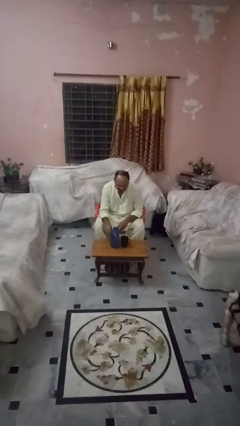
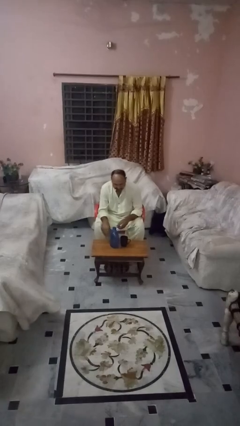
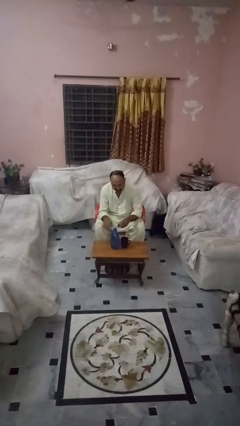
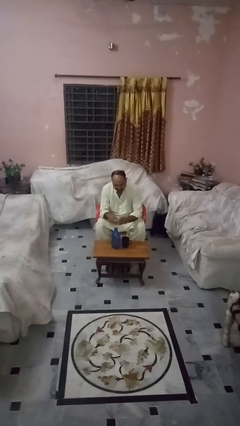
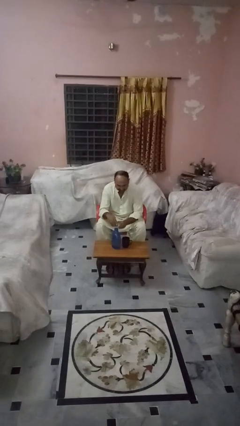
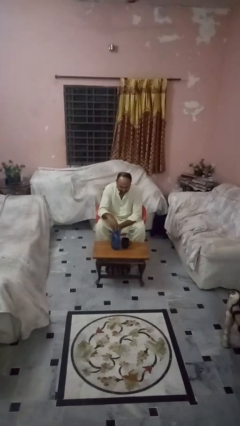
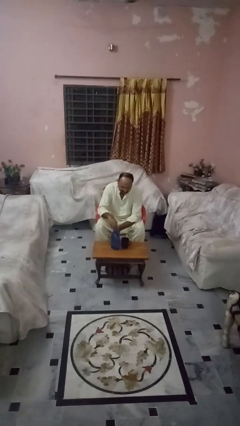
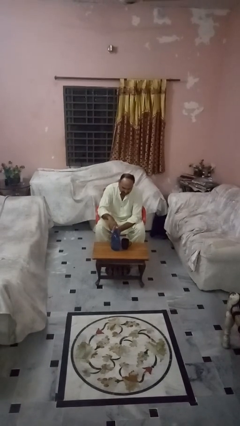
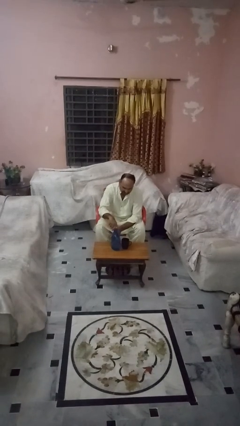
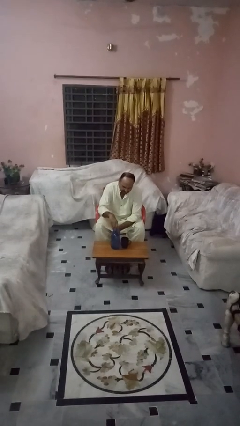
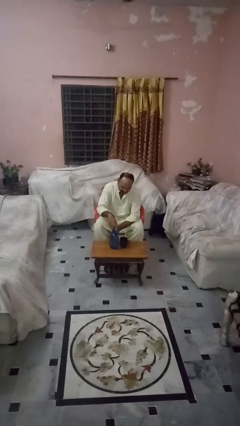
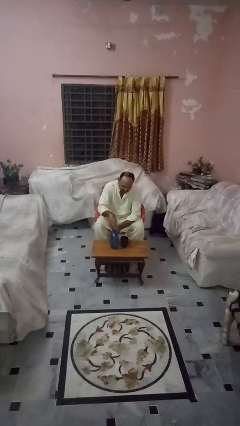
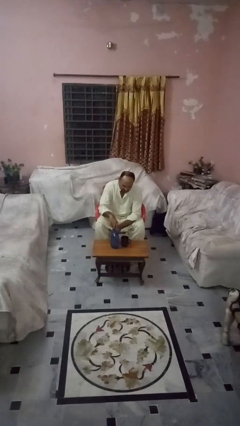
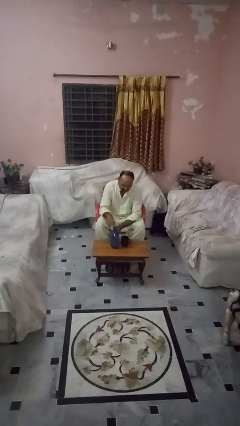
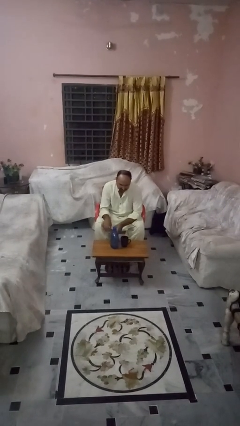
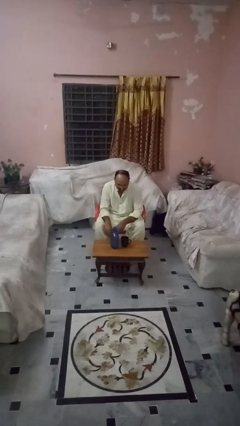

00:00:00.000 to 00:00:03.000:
person screws lid to bottle

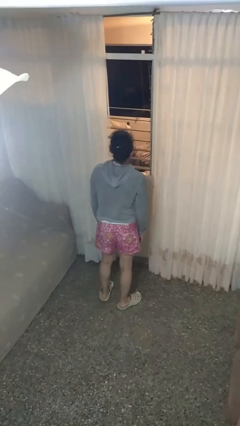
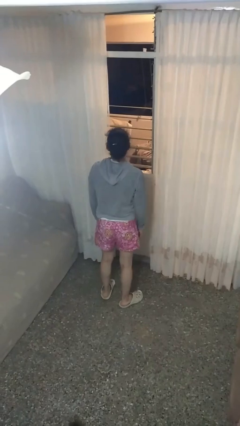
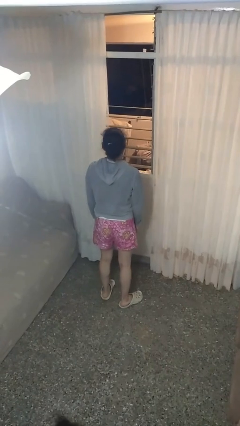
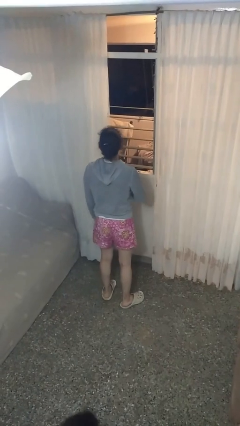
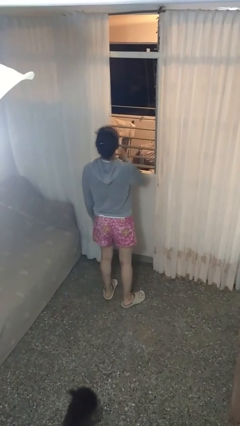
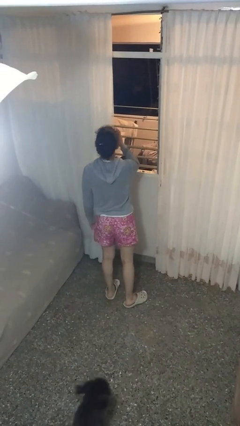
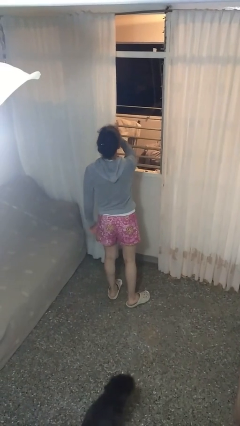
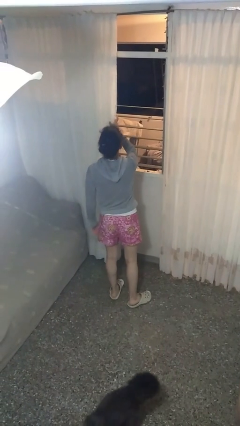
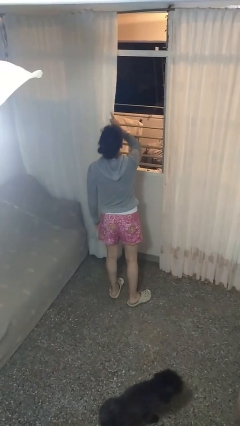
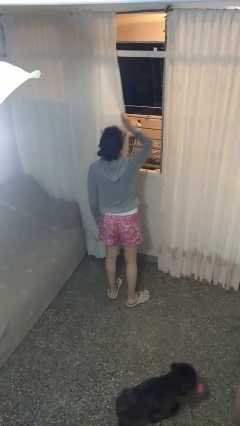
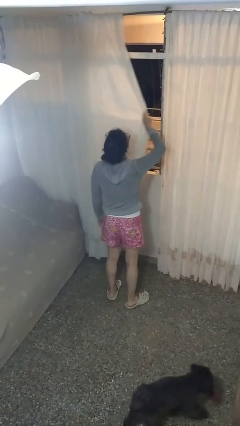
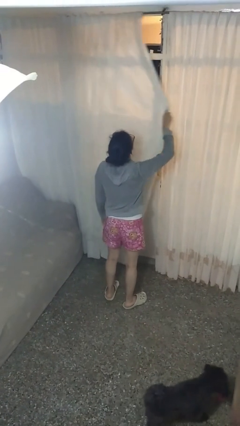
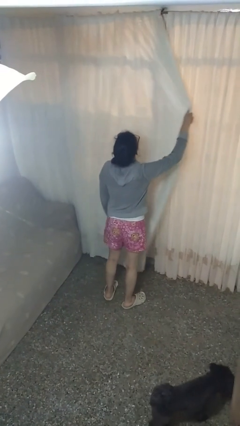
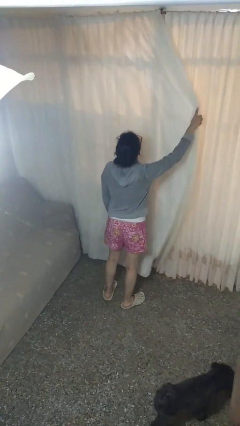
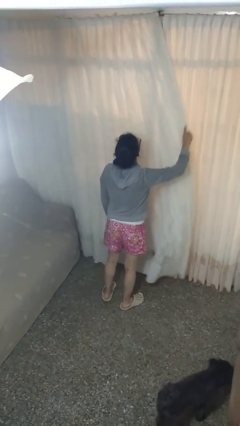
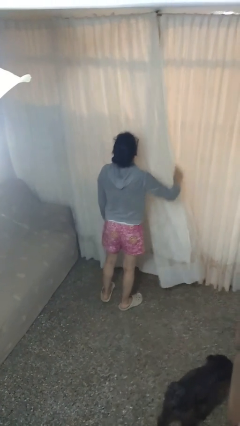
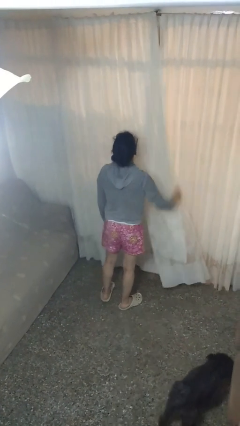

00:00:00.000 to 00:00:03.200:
person closes curtains

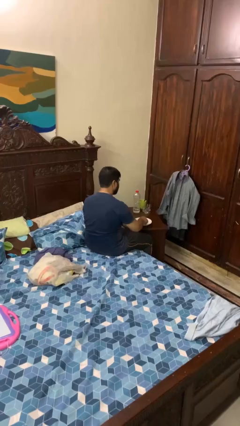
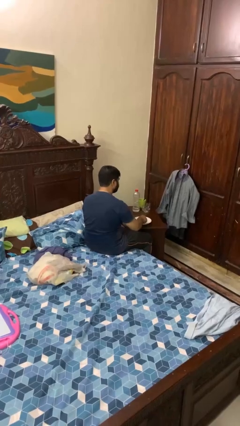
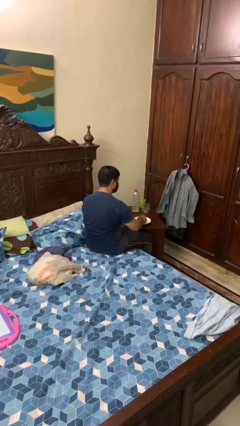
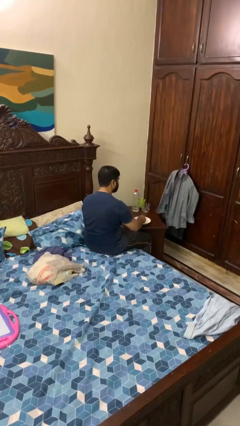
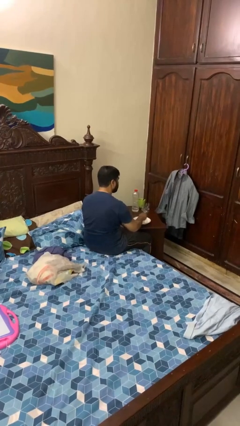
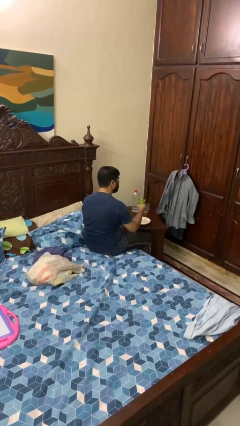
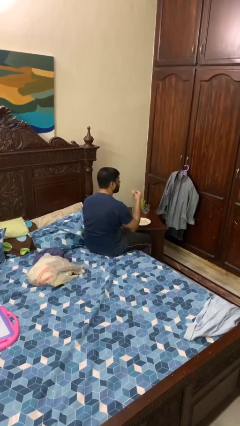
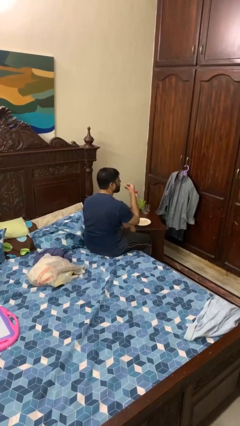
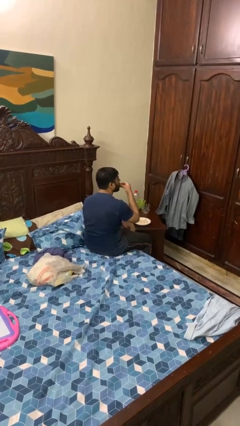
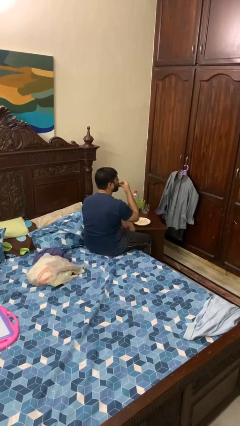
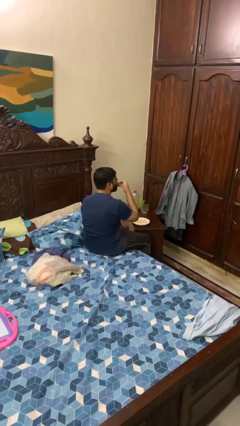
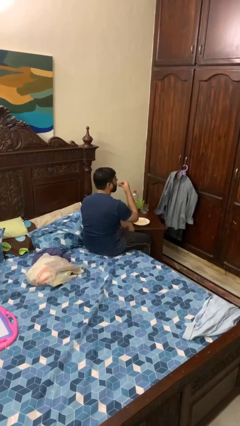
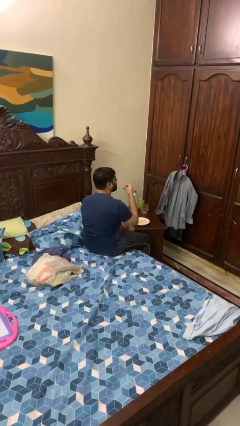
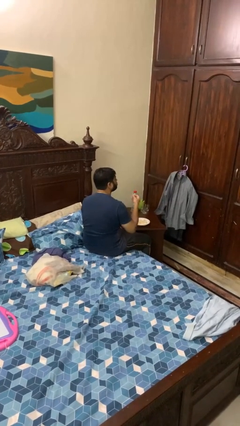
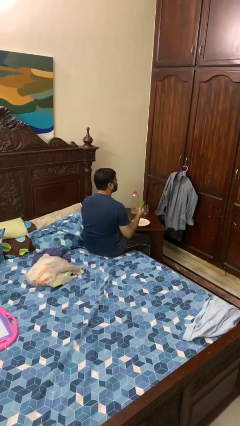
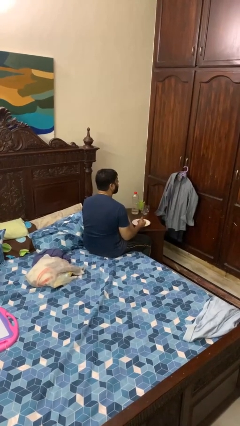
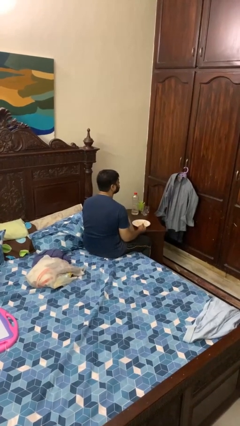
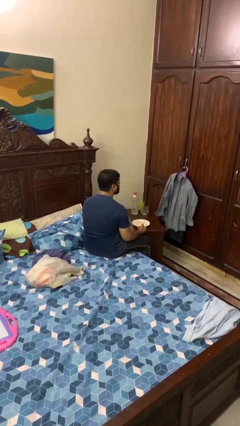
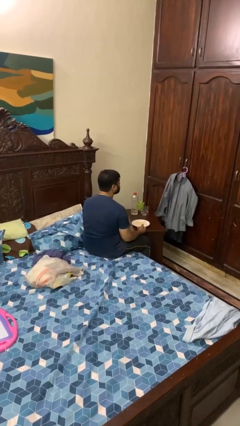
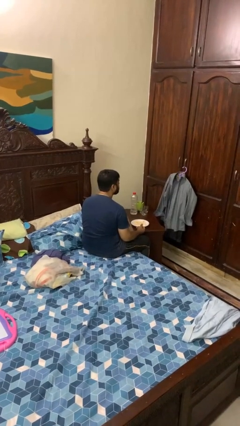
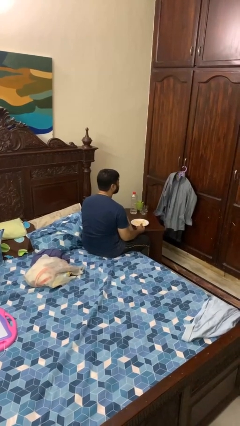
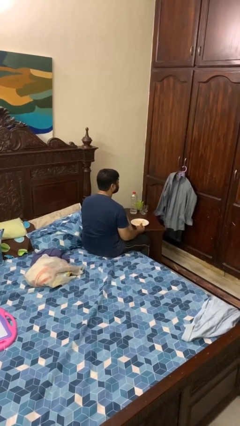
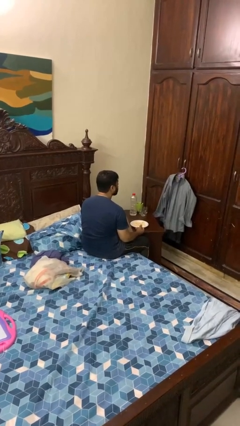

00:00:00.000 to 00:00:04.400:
person eats with hands

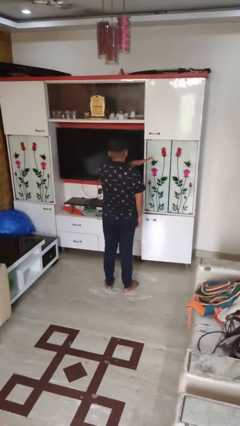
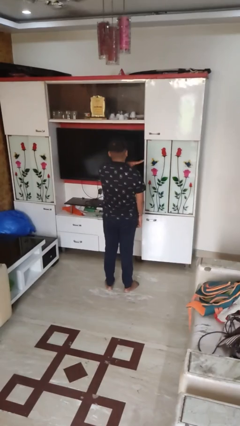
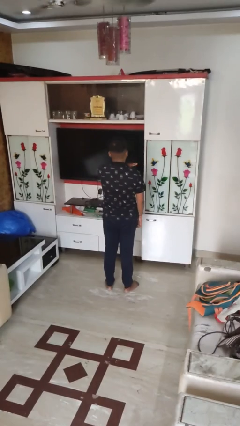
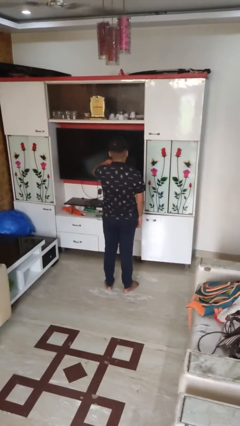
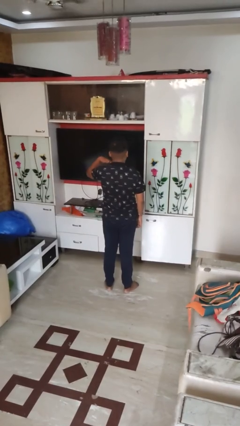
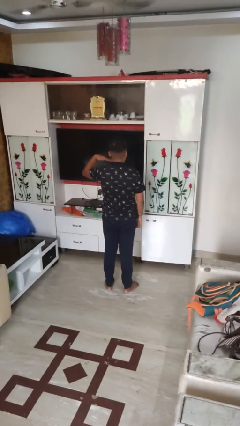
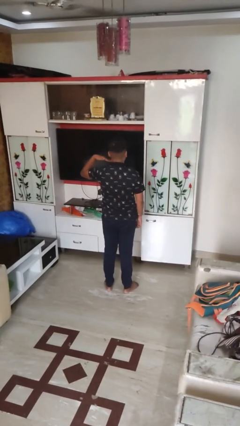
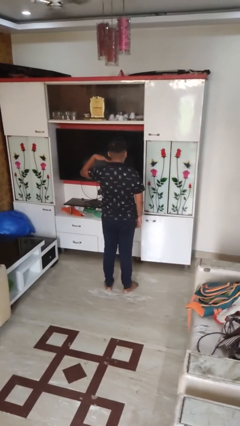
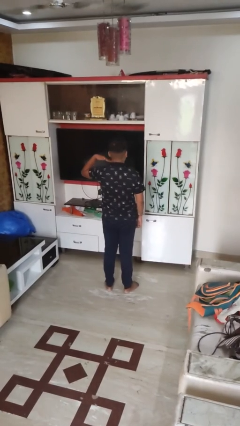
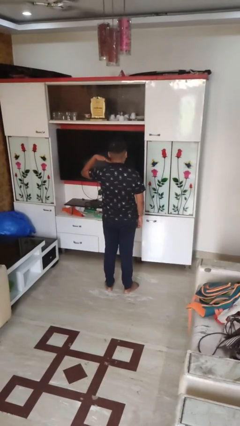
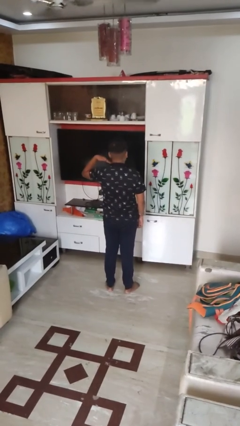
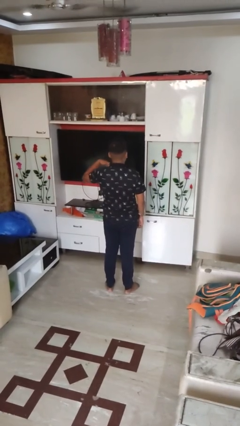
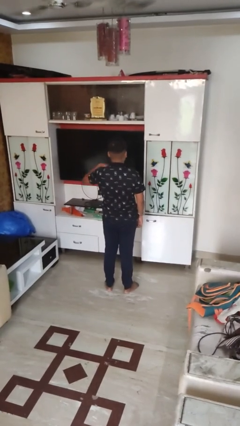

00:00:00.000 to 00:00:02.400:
person gestures cut

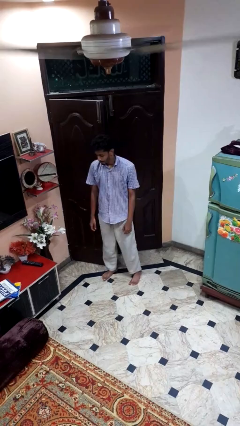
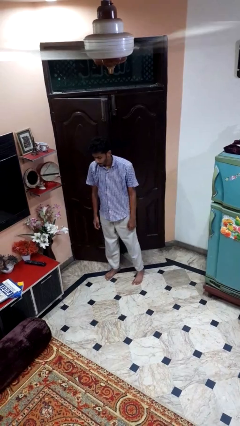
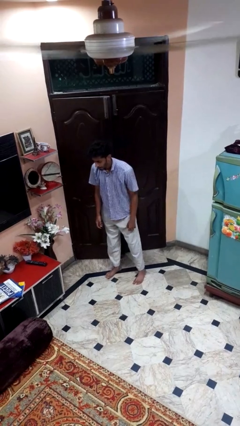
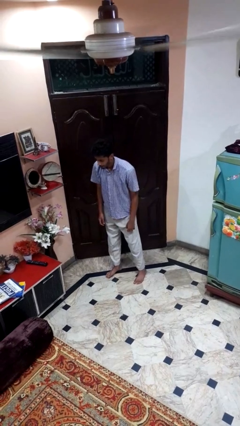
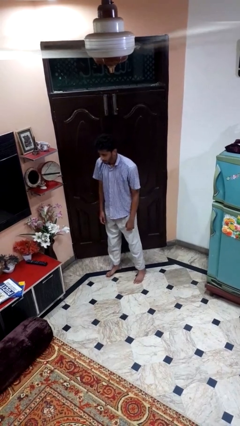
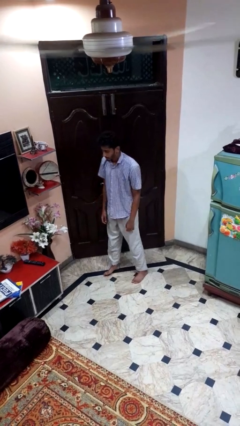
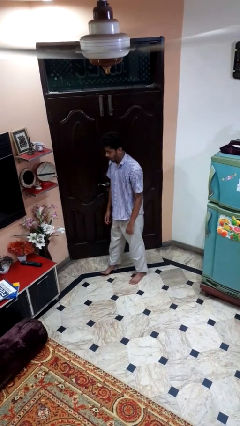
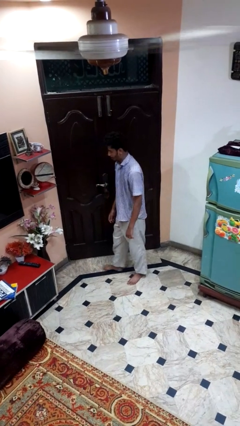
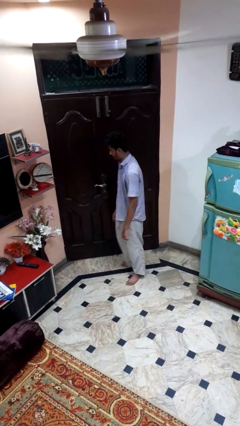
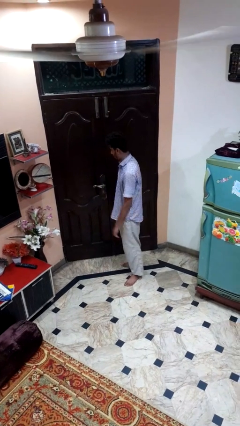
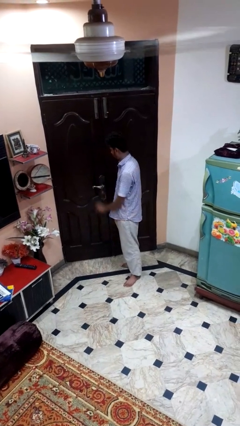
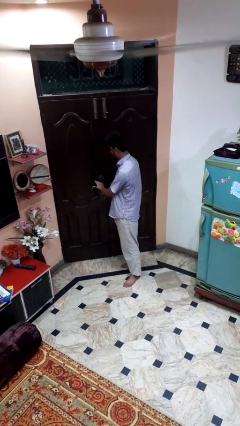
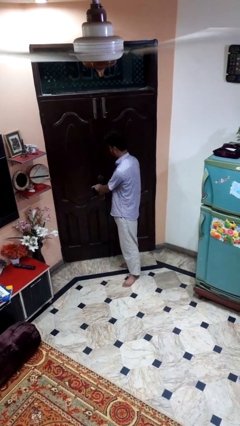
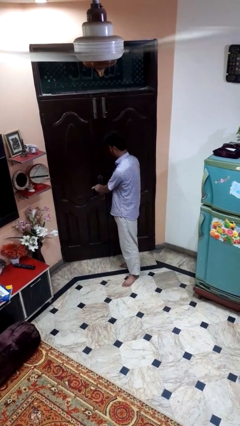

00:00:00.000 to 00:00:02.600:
person closes door with hip

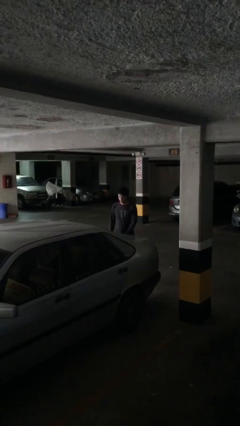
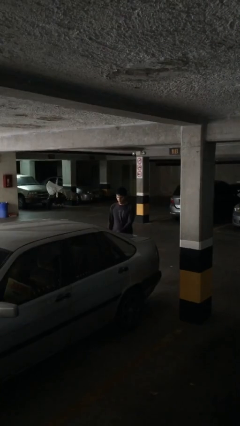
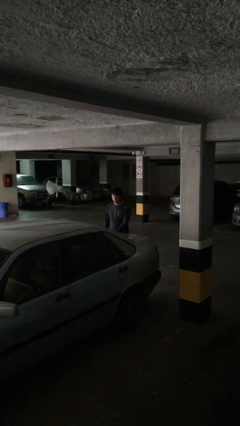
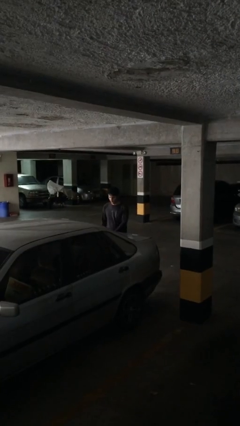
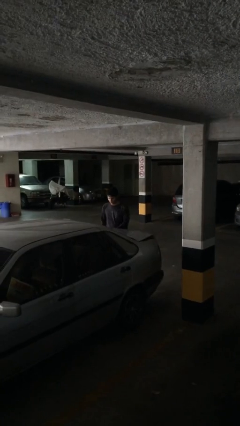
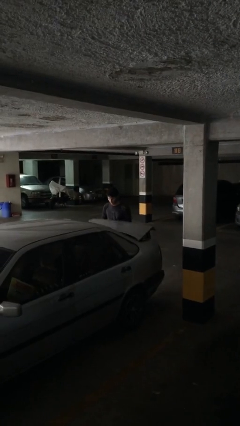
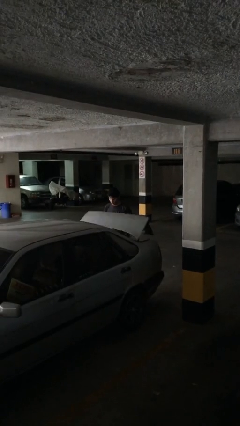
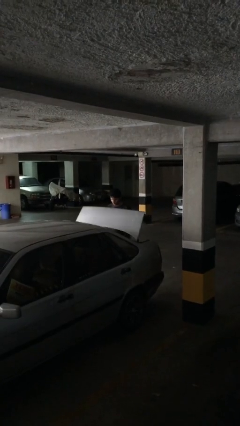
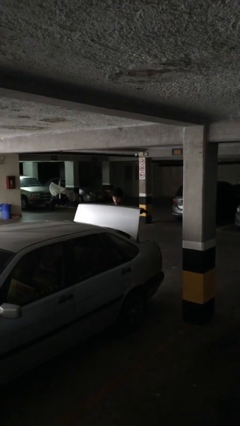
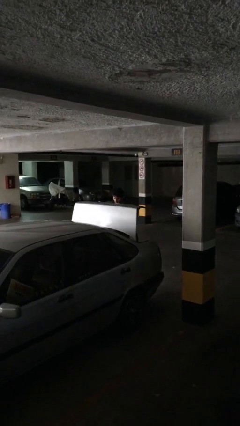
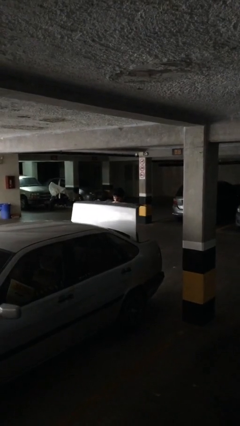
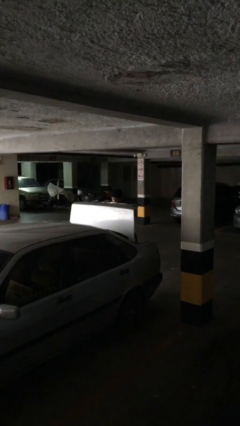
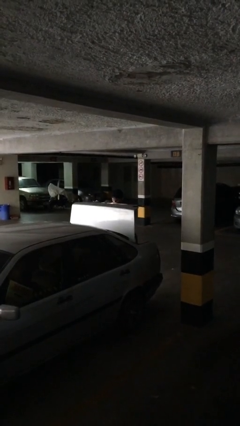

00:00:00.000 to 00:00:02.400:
person opens car trunk
